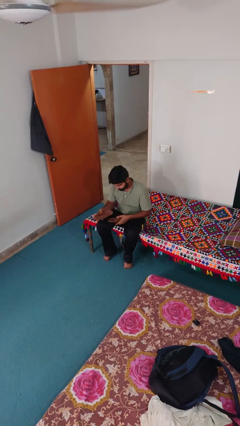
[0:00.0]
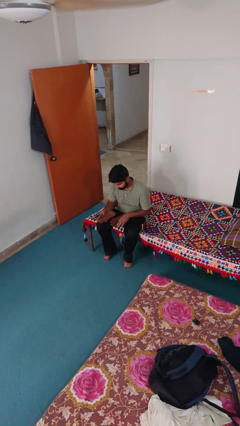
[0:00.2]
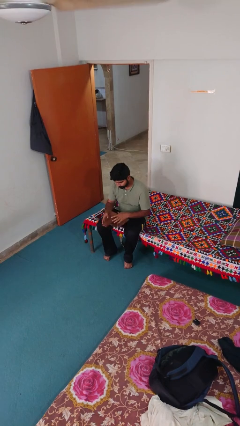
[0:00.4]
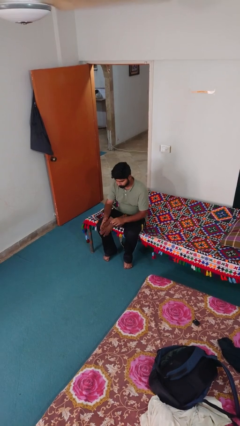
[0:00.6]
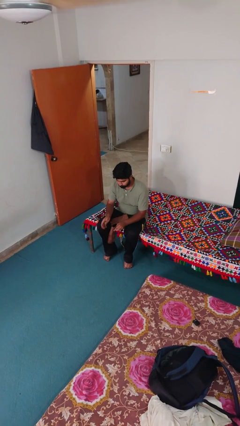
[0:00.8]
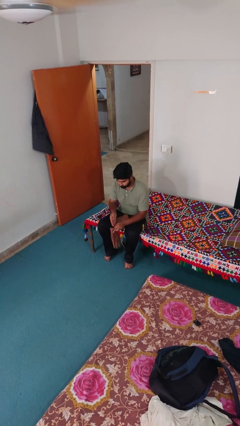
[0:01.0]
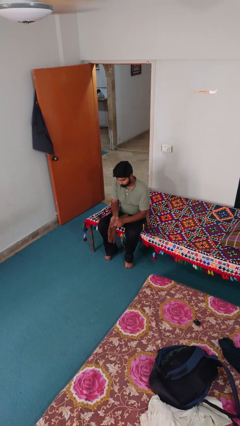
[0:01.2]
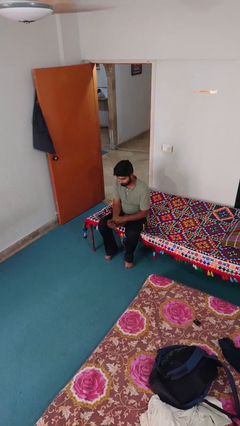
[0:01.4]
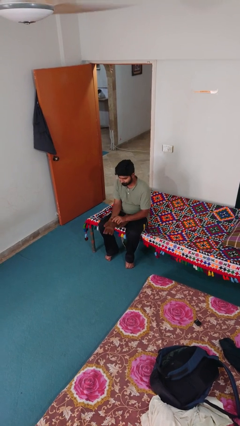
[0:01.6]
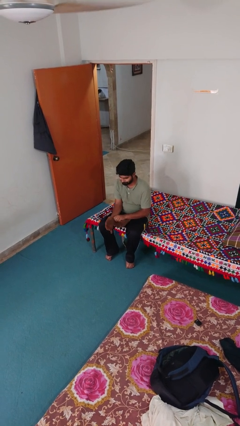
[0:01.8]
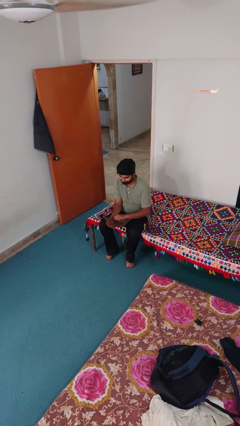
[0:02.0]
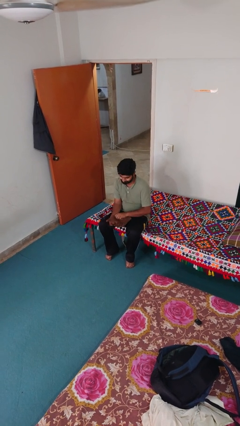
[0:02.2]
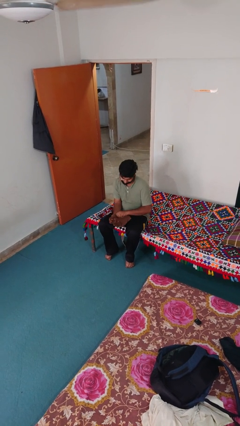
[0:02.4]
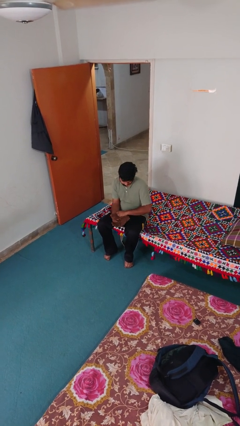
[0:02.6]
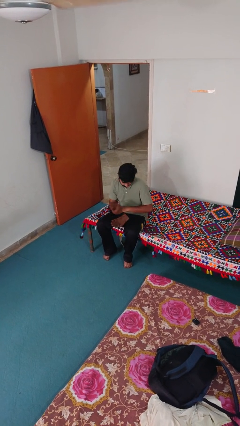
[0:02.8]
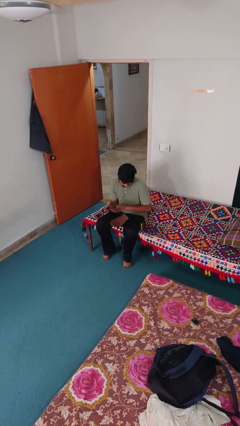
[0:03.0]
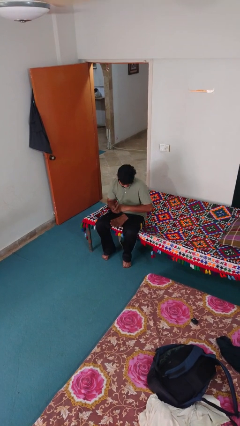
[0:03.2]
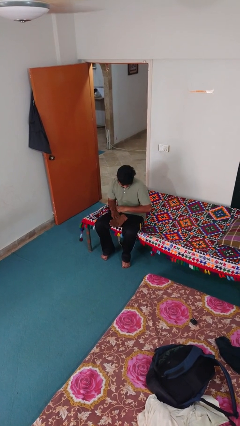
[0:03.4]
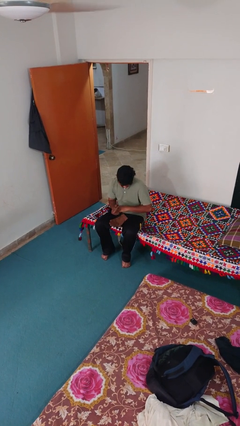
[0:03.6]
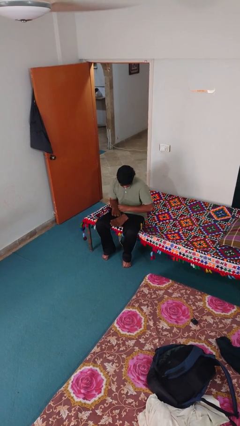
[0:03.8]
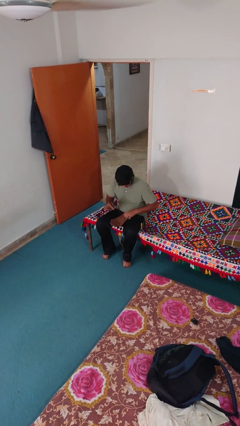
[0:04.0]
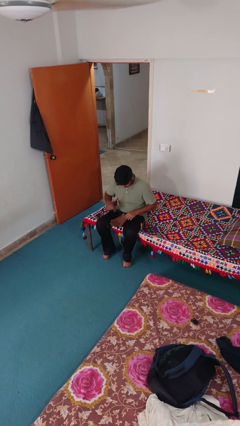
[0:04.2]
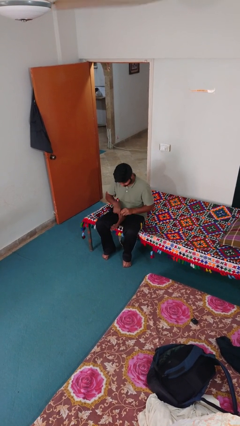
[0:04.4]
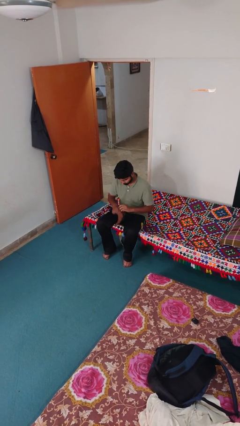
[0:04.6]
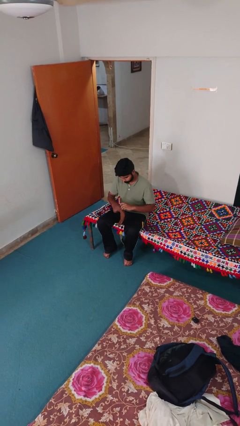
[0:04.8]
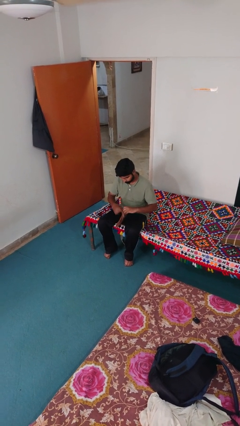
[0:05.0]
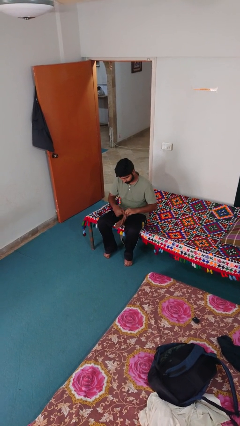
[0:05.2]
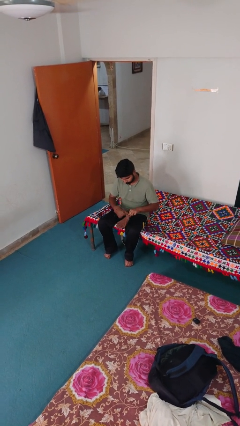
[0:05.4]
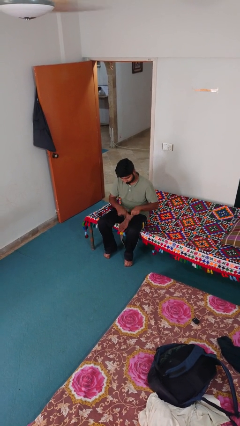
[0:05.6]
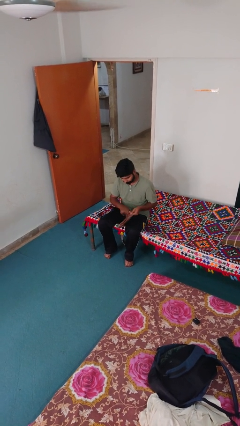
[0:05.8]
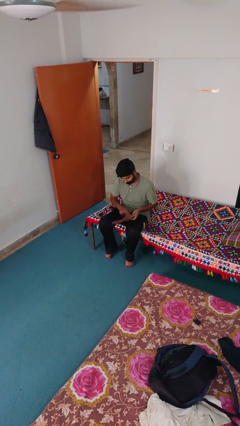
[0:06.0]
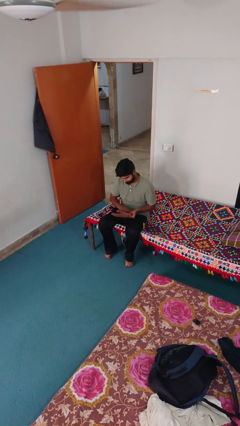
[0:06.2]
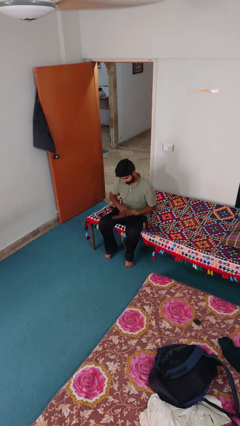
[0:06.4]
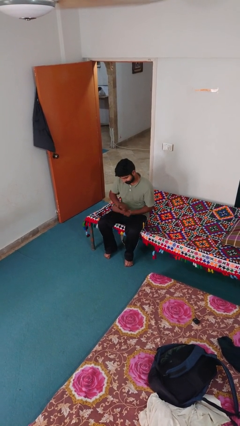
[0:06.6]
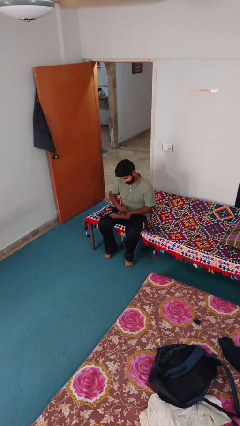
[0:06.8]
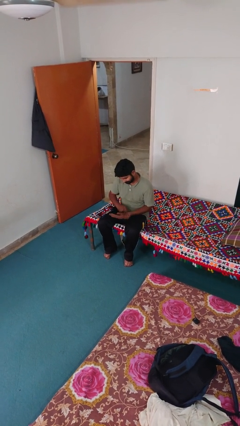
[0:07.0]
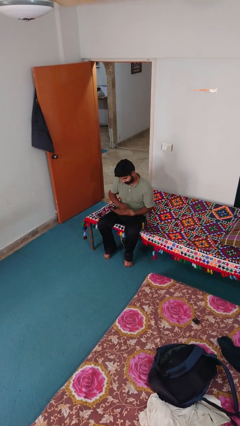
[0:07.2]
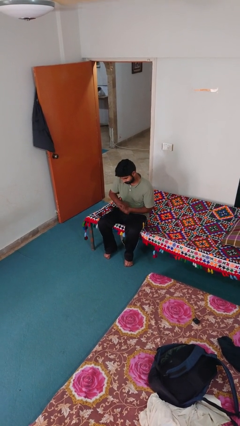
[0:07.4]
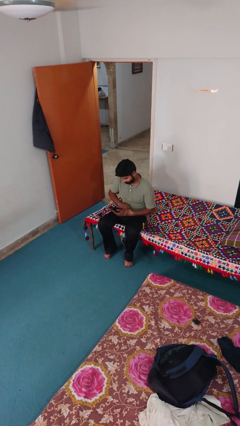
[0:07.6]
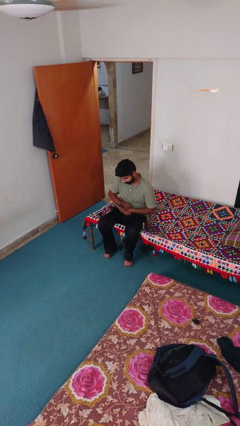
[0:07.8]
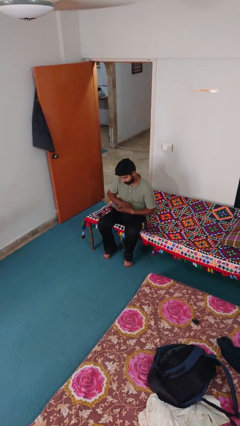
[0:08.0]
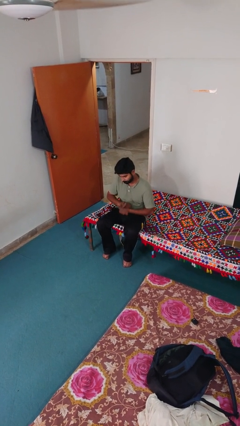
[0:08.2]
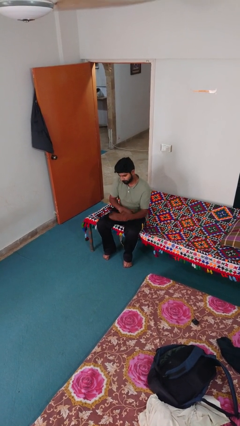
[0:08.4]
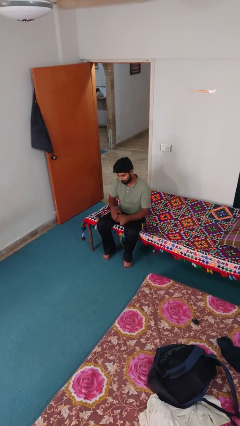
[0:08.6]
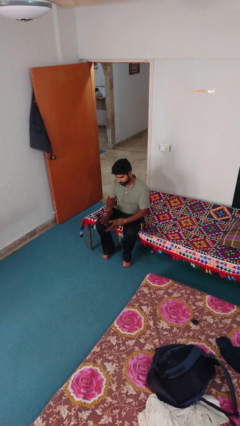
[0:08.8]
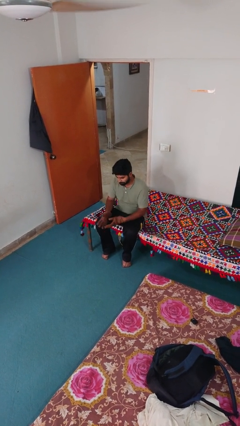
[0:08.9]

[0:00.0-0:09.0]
person puts on gloves

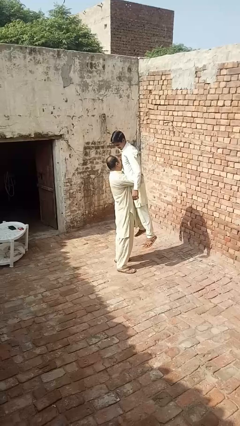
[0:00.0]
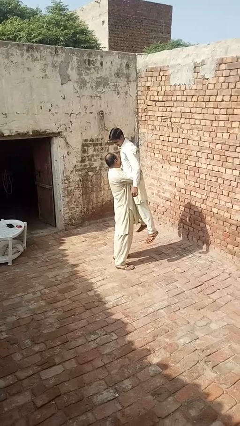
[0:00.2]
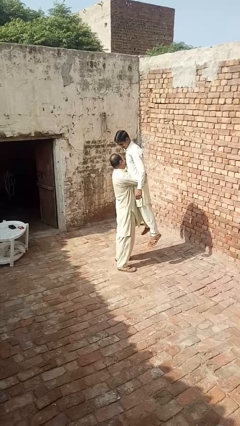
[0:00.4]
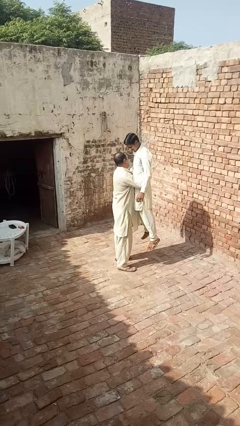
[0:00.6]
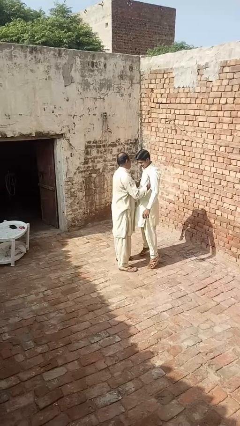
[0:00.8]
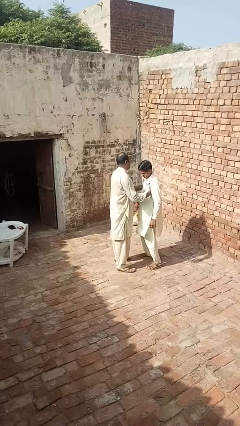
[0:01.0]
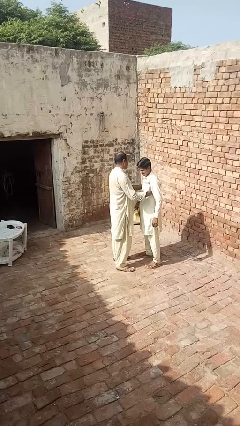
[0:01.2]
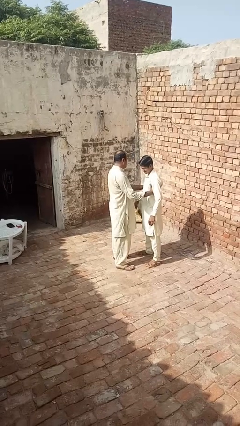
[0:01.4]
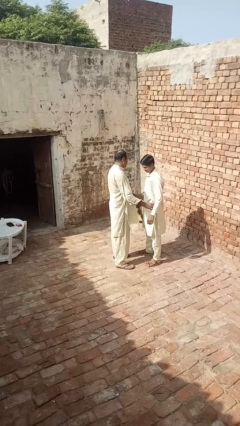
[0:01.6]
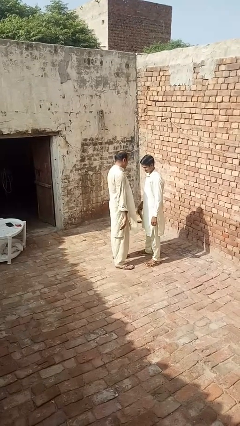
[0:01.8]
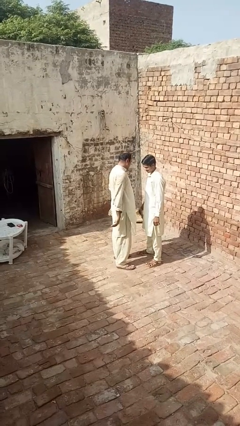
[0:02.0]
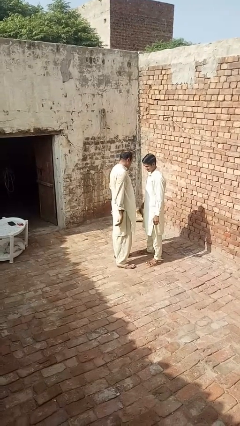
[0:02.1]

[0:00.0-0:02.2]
person puts down person

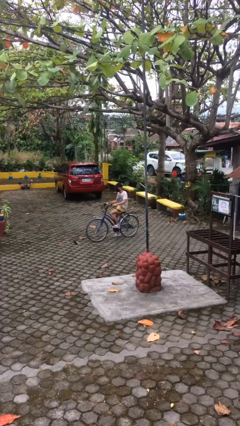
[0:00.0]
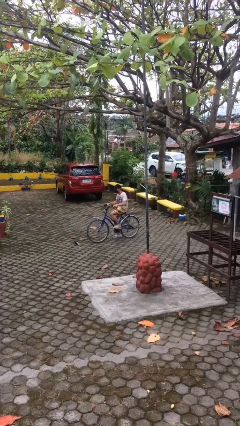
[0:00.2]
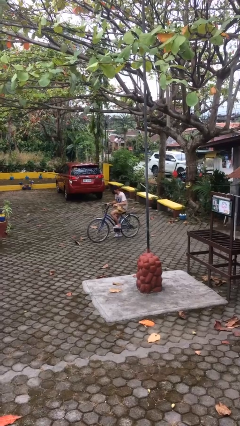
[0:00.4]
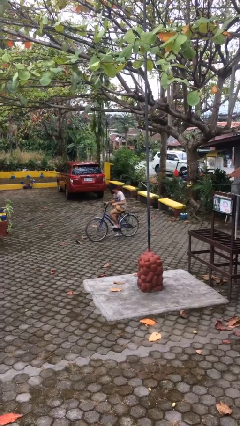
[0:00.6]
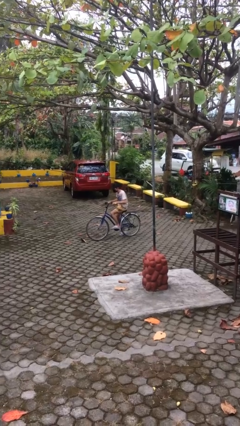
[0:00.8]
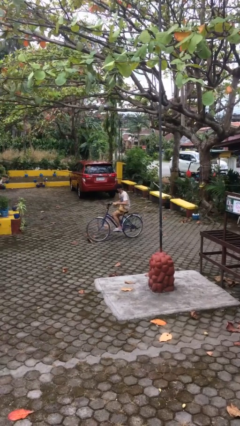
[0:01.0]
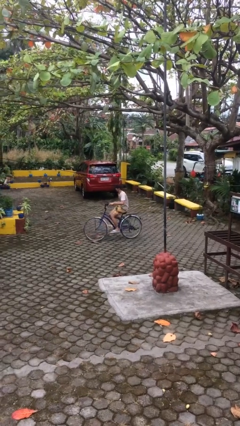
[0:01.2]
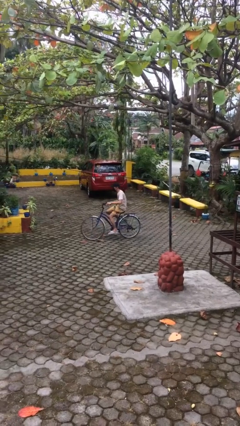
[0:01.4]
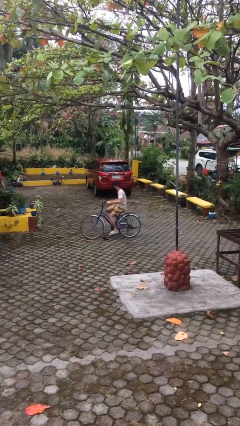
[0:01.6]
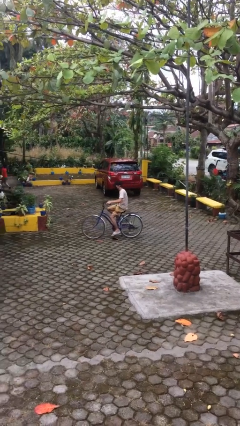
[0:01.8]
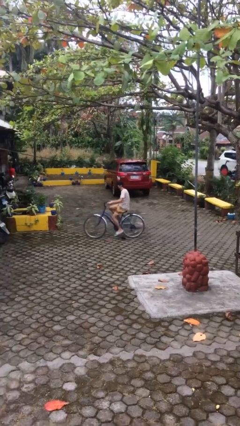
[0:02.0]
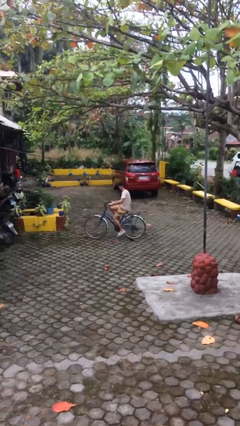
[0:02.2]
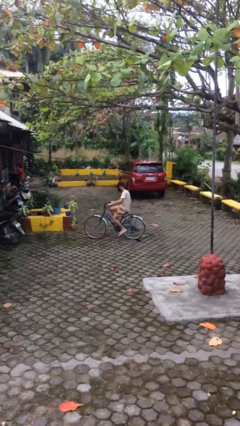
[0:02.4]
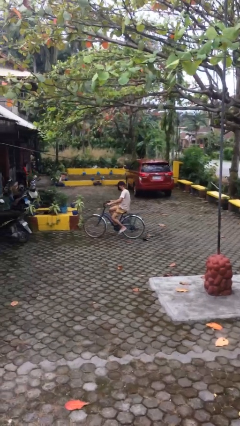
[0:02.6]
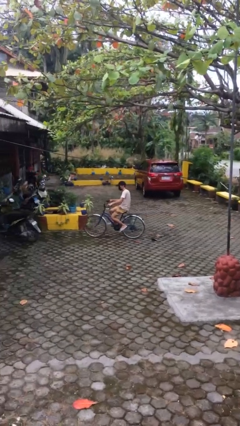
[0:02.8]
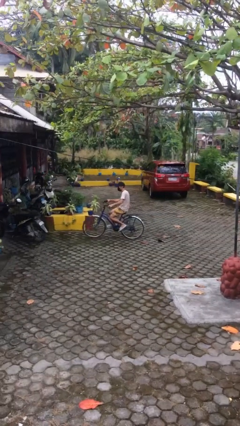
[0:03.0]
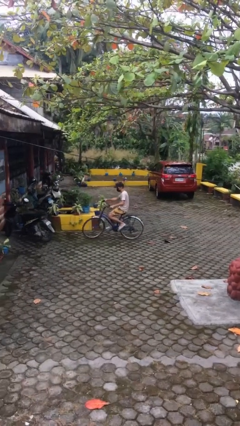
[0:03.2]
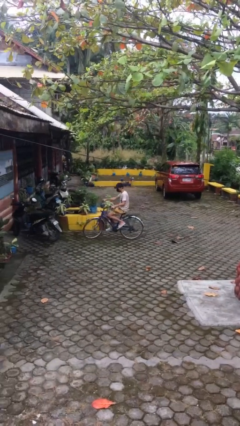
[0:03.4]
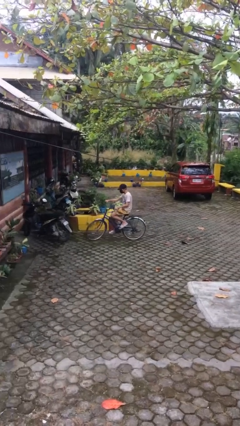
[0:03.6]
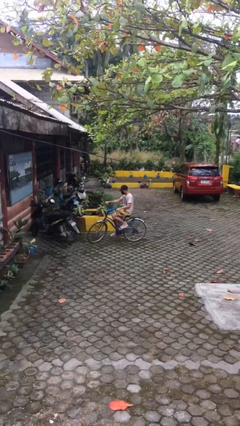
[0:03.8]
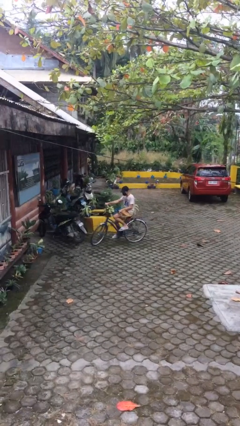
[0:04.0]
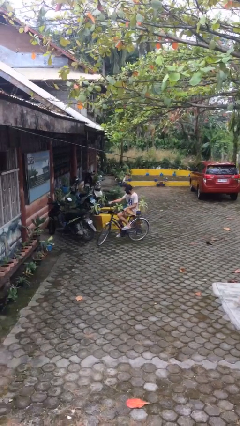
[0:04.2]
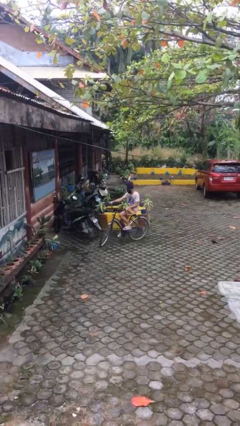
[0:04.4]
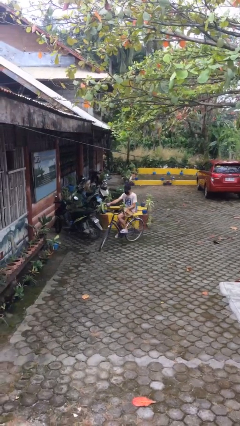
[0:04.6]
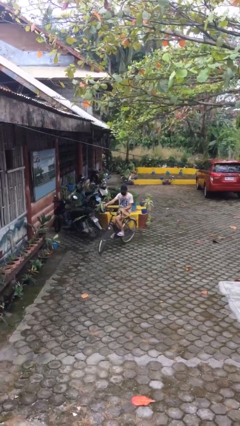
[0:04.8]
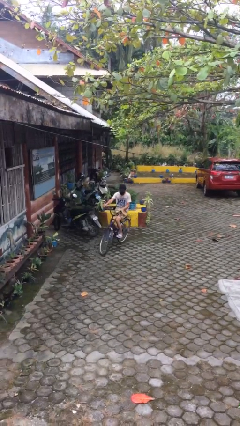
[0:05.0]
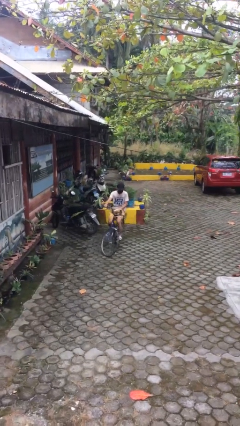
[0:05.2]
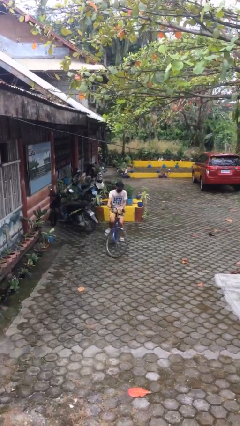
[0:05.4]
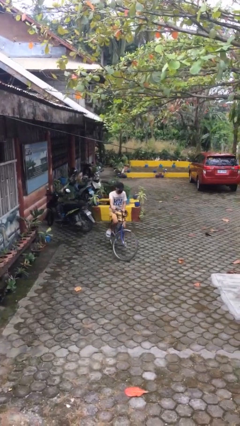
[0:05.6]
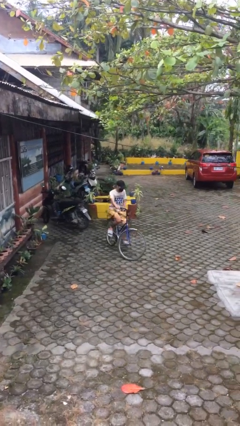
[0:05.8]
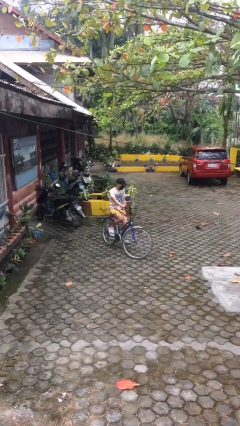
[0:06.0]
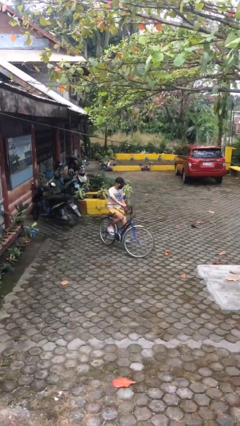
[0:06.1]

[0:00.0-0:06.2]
person rides bicycle

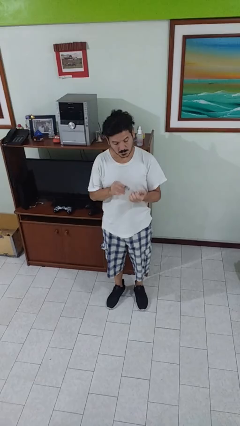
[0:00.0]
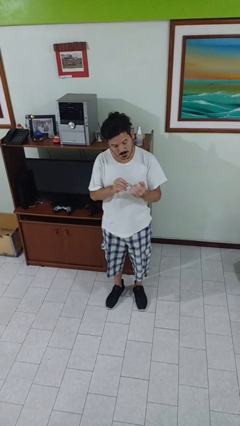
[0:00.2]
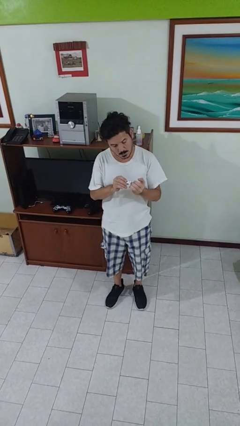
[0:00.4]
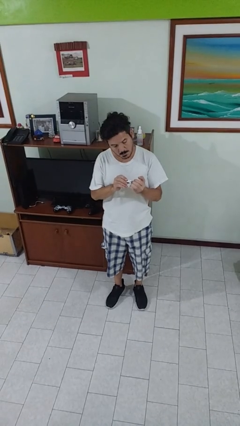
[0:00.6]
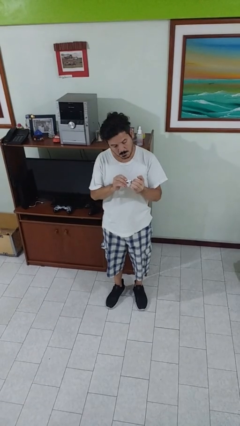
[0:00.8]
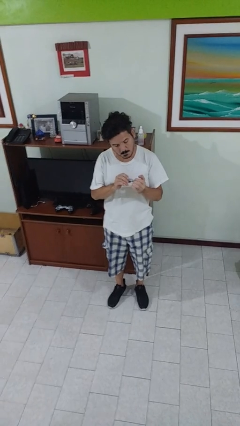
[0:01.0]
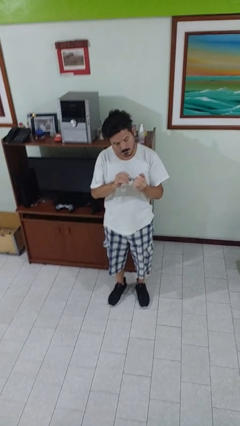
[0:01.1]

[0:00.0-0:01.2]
person clips fingernails
